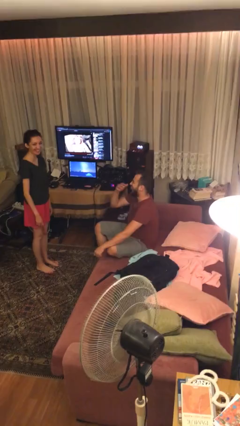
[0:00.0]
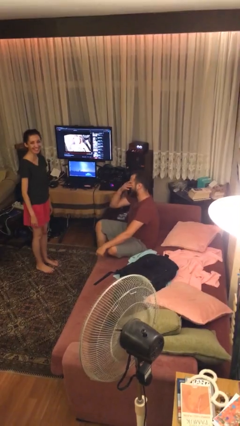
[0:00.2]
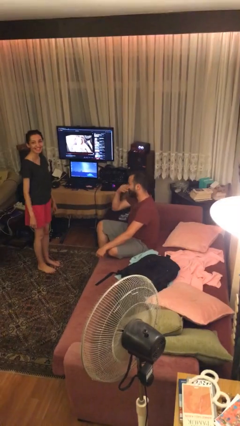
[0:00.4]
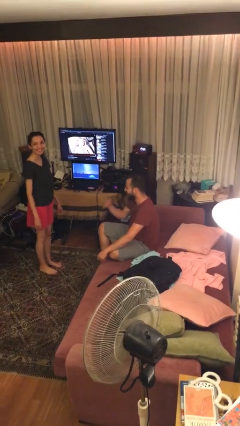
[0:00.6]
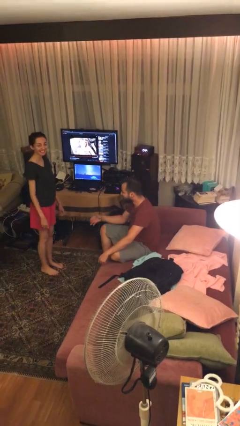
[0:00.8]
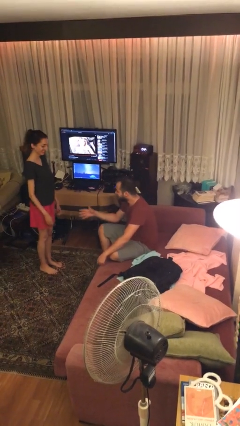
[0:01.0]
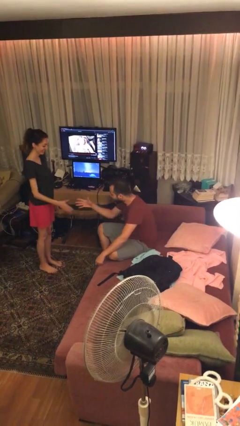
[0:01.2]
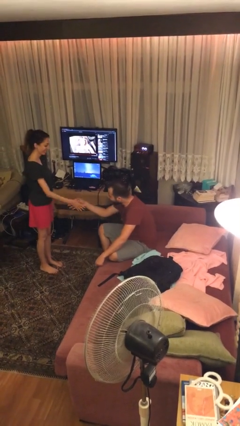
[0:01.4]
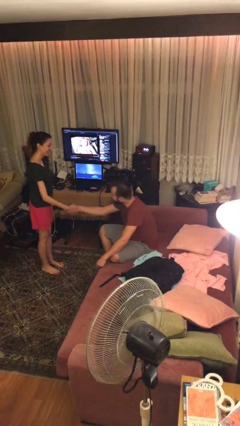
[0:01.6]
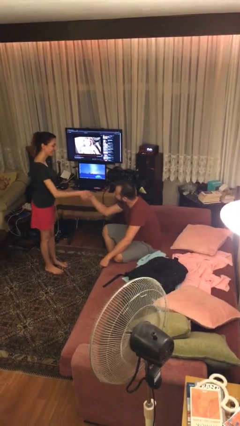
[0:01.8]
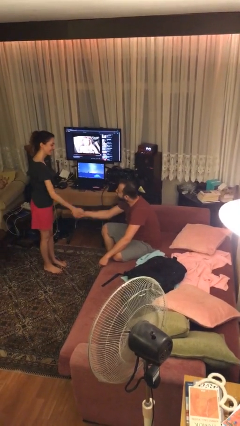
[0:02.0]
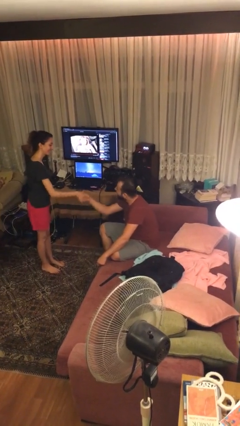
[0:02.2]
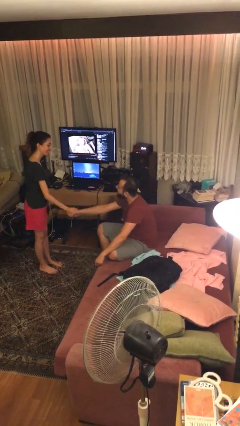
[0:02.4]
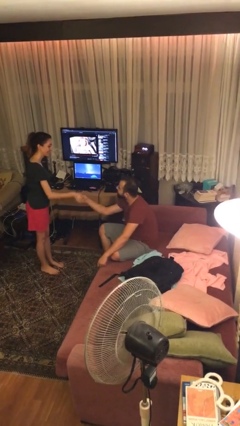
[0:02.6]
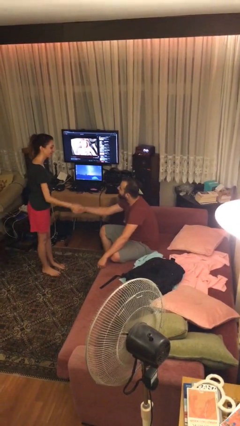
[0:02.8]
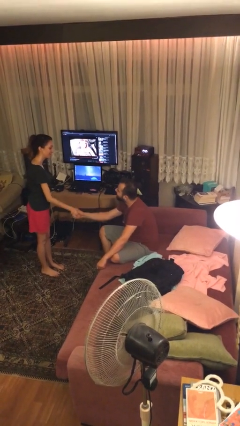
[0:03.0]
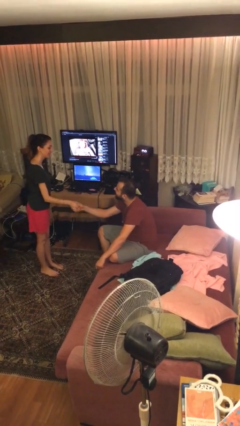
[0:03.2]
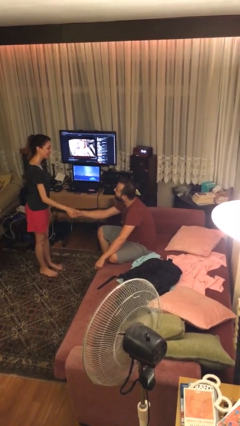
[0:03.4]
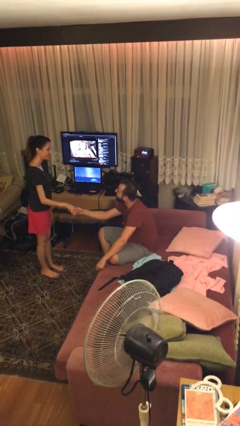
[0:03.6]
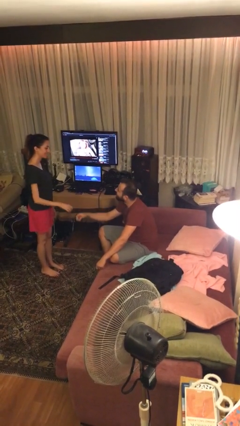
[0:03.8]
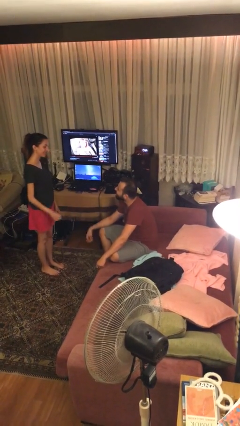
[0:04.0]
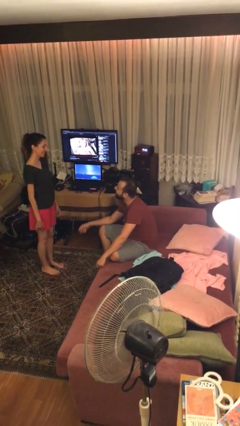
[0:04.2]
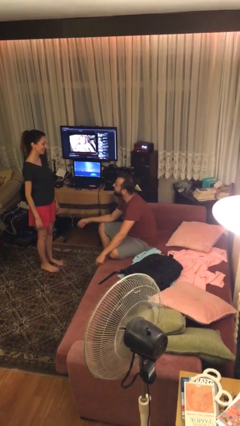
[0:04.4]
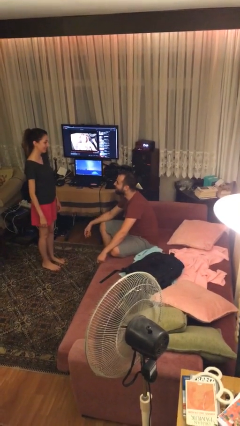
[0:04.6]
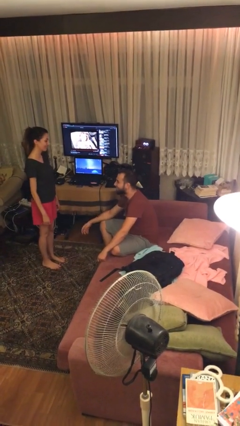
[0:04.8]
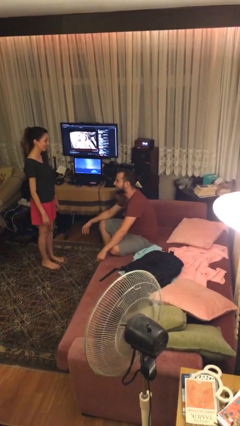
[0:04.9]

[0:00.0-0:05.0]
person shakes hand

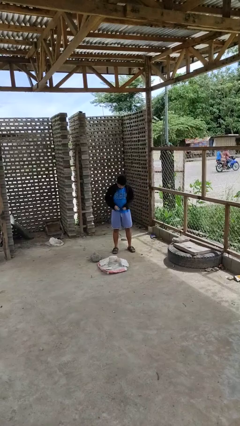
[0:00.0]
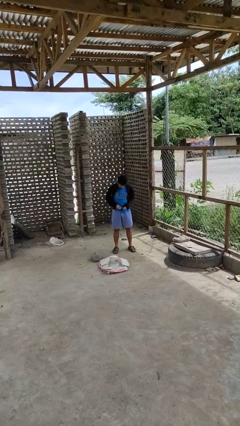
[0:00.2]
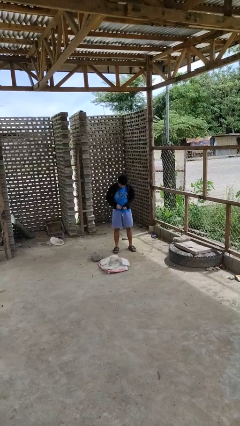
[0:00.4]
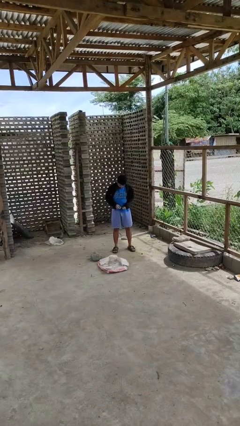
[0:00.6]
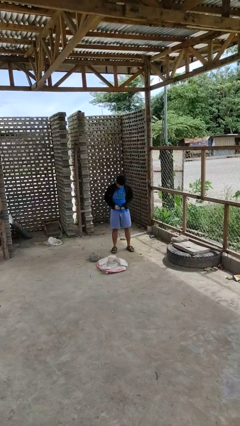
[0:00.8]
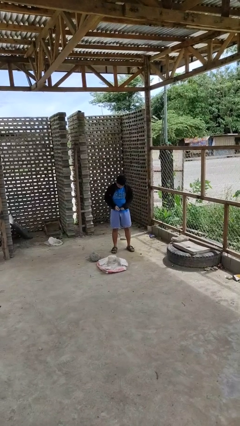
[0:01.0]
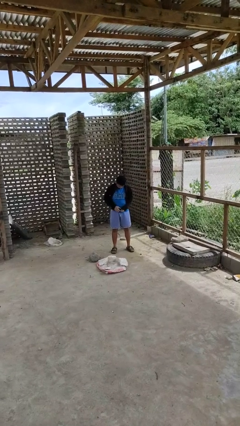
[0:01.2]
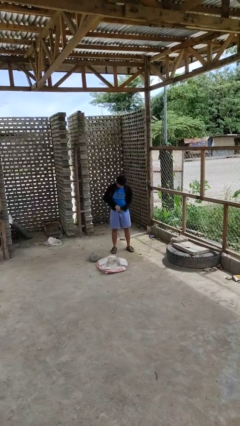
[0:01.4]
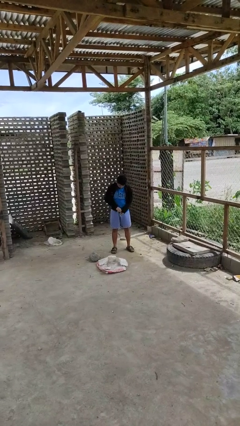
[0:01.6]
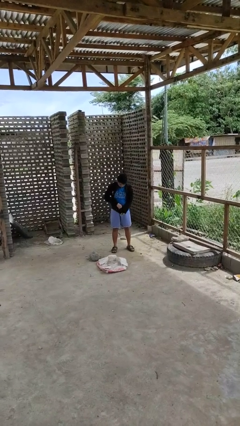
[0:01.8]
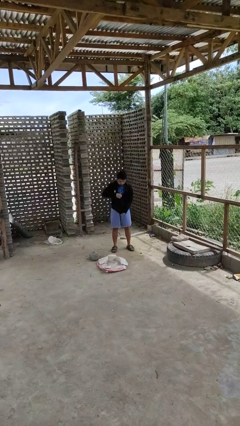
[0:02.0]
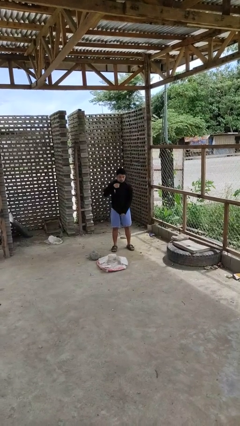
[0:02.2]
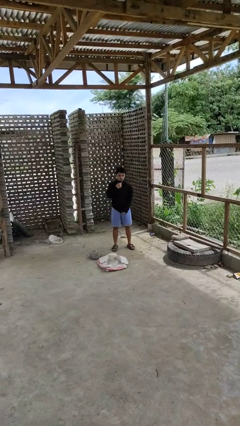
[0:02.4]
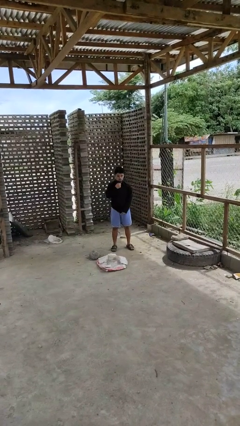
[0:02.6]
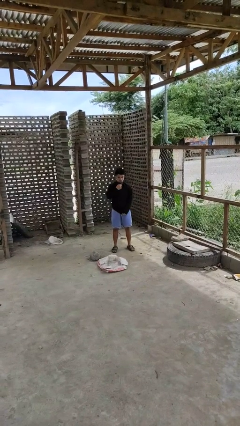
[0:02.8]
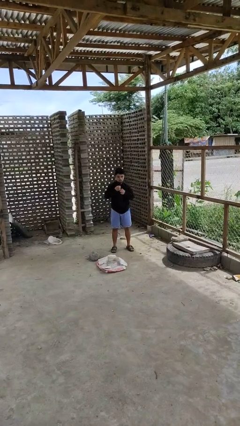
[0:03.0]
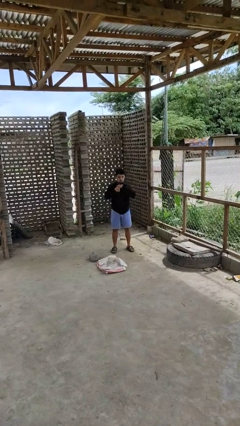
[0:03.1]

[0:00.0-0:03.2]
person zips up jacket

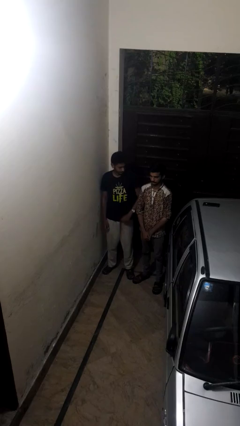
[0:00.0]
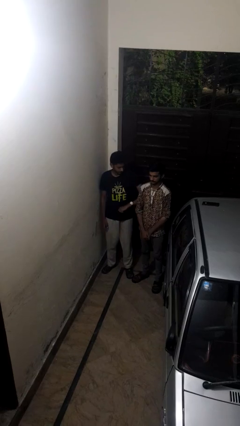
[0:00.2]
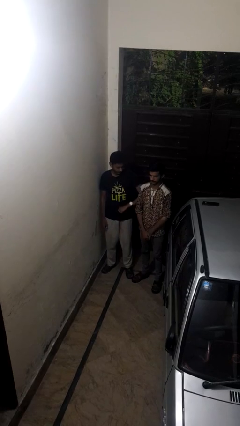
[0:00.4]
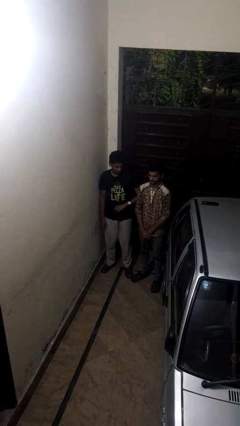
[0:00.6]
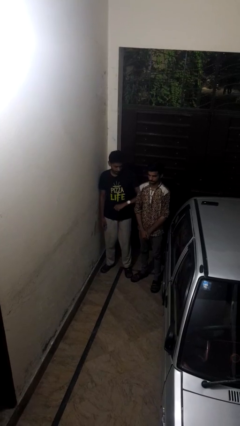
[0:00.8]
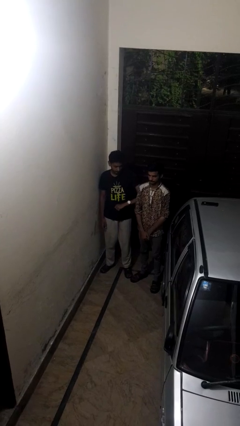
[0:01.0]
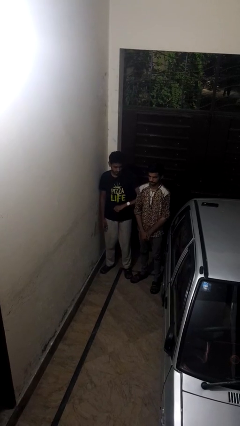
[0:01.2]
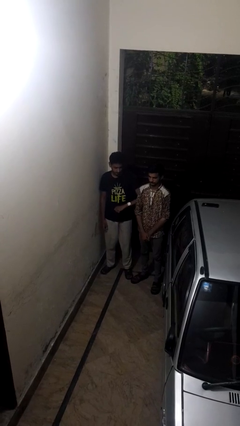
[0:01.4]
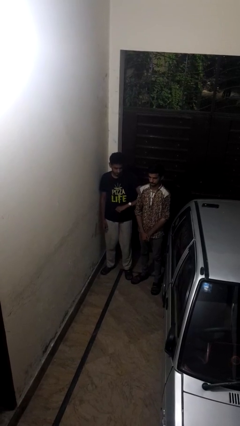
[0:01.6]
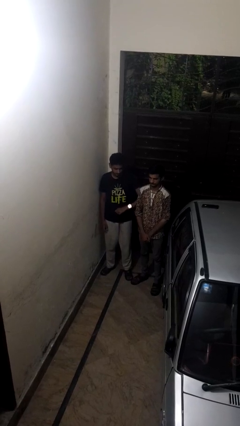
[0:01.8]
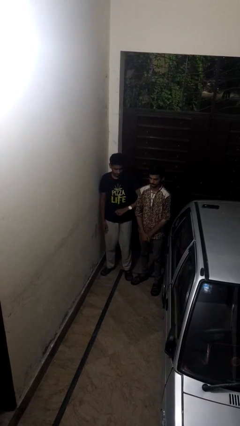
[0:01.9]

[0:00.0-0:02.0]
person nudges person with elbow

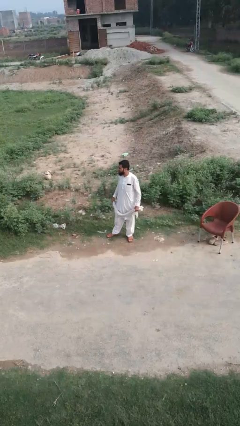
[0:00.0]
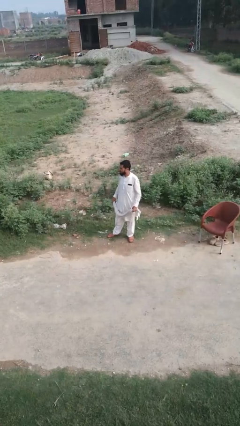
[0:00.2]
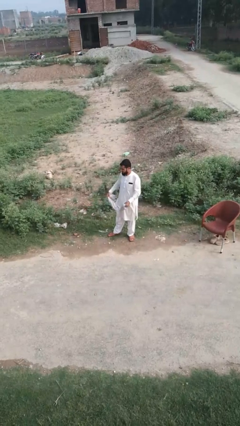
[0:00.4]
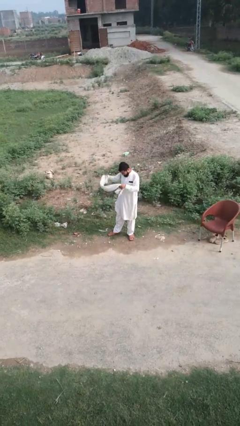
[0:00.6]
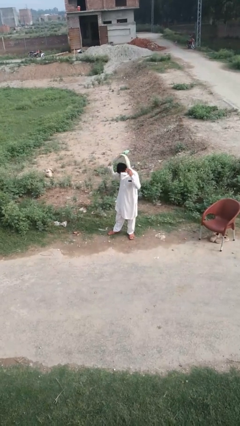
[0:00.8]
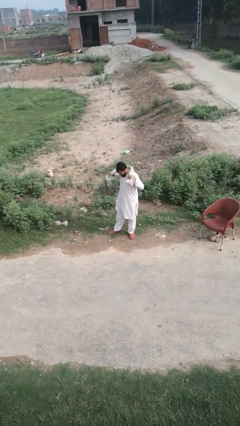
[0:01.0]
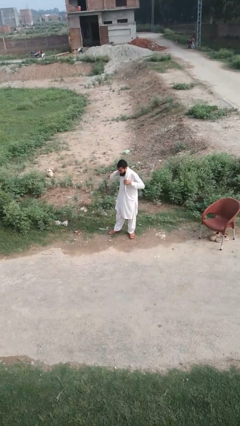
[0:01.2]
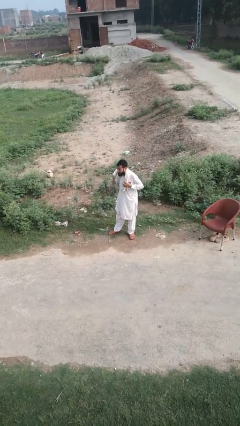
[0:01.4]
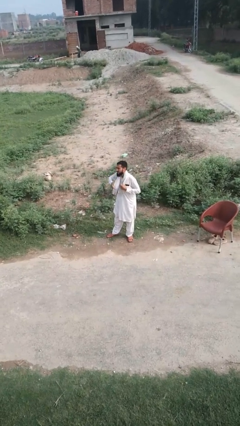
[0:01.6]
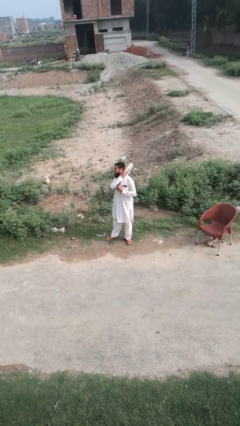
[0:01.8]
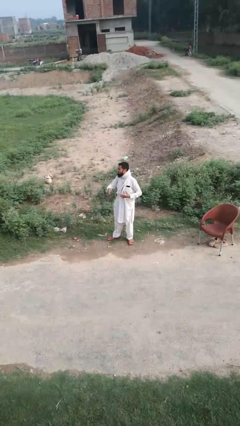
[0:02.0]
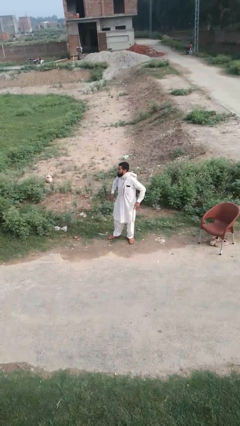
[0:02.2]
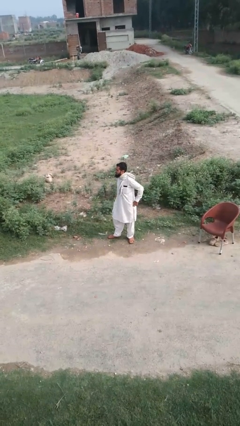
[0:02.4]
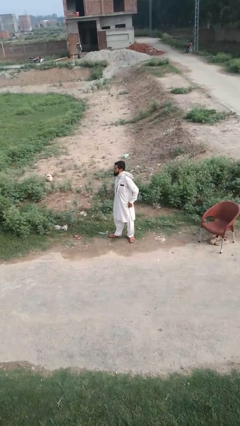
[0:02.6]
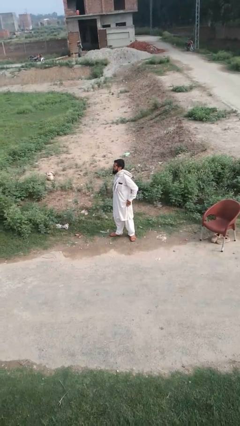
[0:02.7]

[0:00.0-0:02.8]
person puts on scarf

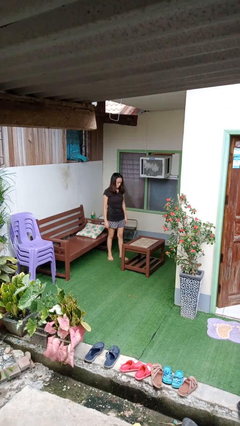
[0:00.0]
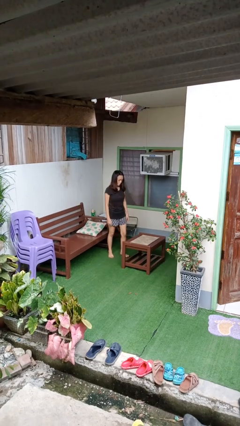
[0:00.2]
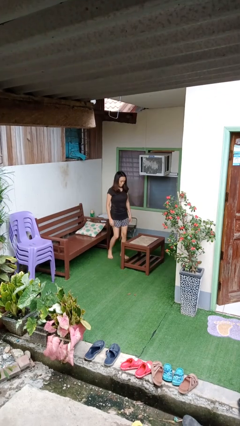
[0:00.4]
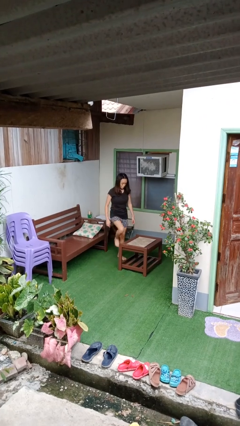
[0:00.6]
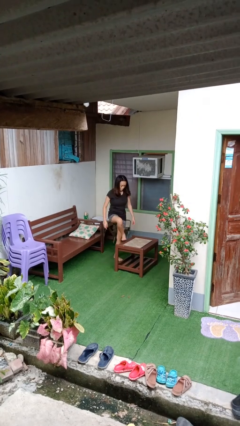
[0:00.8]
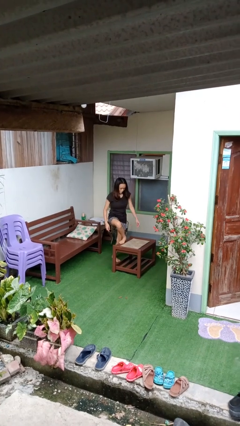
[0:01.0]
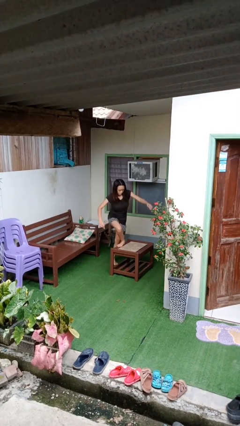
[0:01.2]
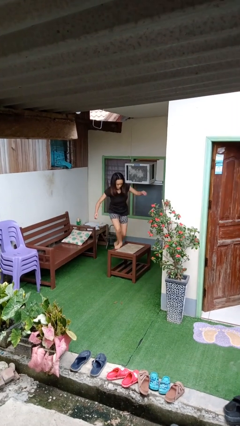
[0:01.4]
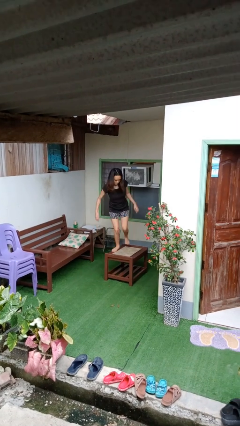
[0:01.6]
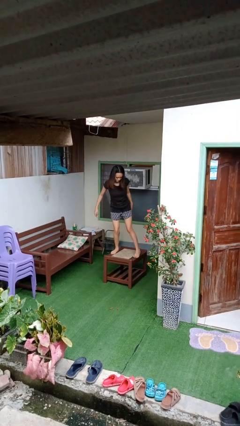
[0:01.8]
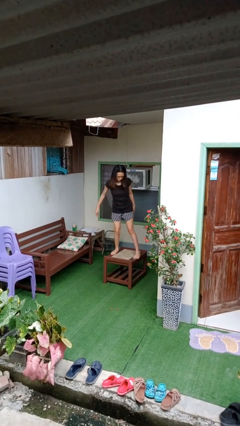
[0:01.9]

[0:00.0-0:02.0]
person climbs on table

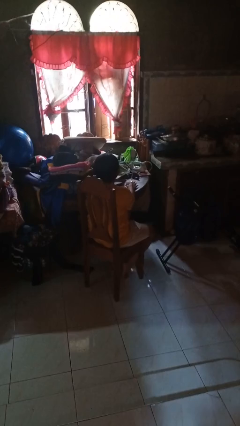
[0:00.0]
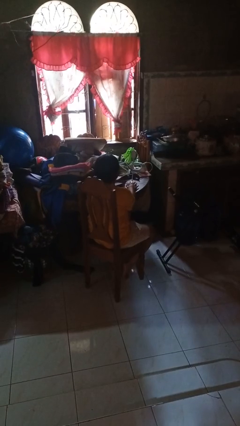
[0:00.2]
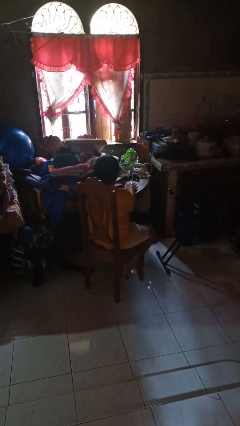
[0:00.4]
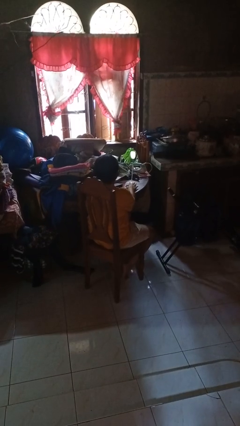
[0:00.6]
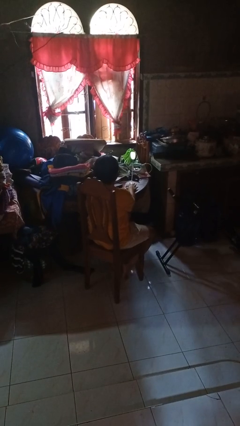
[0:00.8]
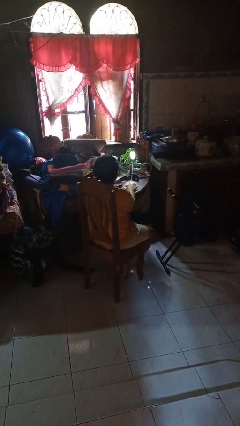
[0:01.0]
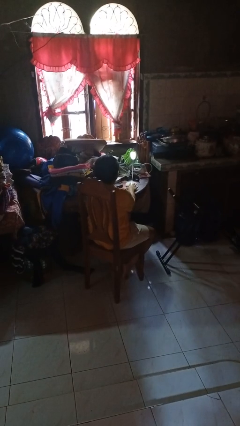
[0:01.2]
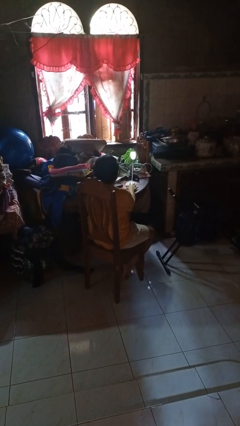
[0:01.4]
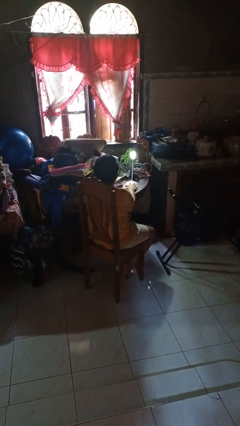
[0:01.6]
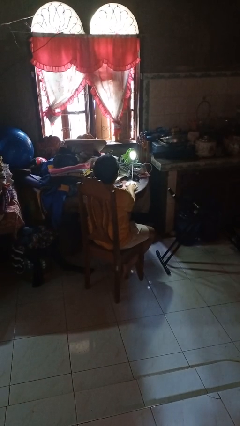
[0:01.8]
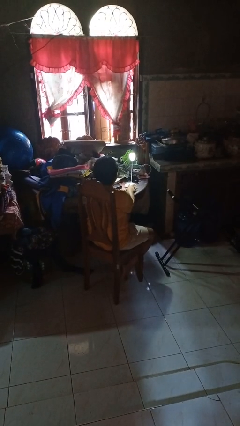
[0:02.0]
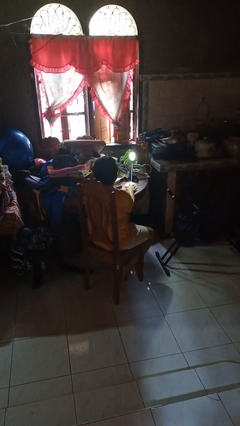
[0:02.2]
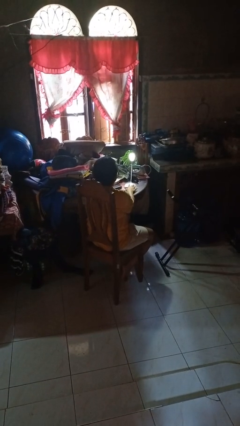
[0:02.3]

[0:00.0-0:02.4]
person turns on lamp

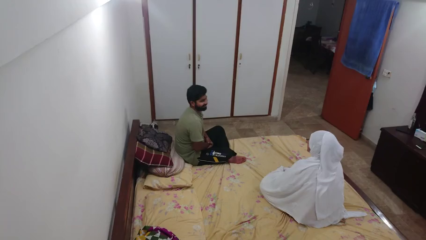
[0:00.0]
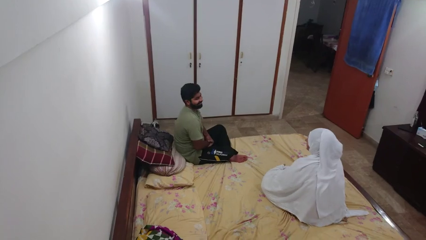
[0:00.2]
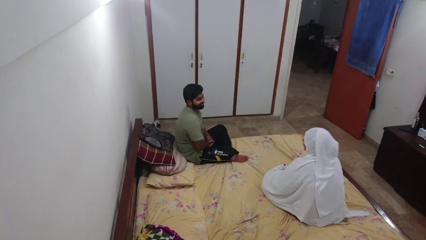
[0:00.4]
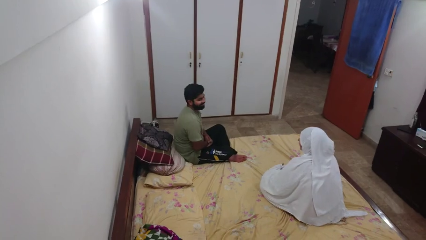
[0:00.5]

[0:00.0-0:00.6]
person laughs with person
